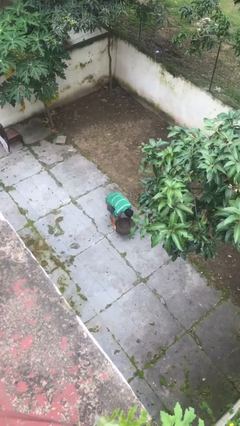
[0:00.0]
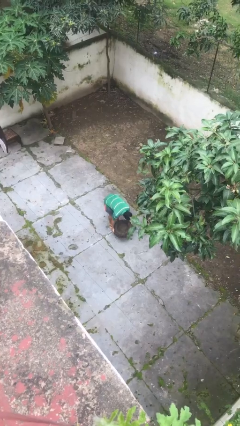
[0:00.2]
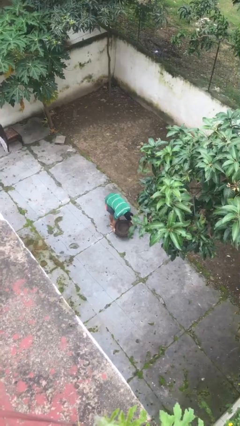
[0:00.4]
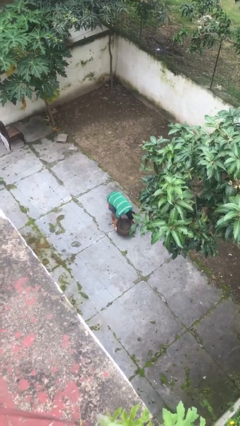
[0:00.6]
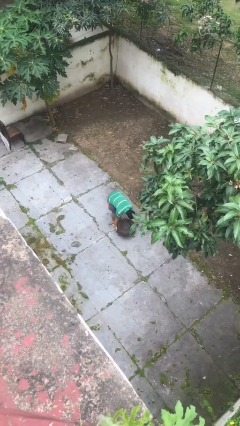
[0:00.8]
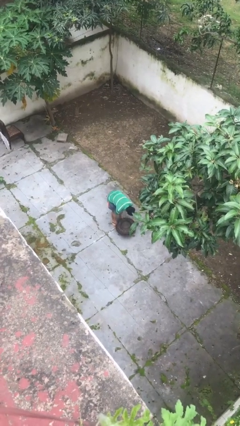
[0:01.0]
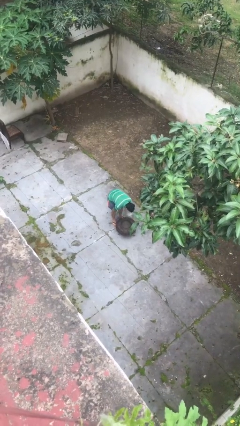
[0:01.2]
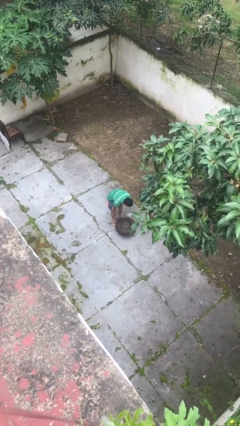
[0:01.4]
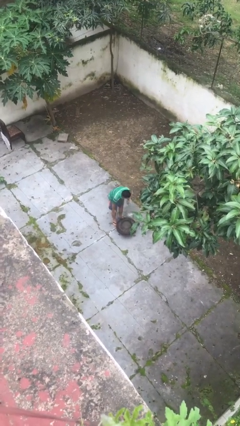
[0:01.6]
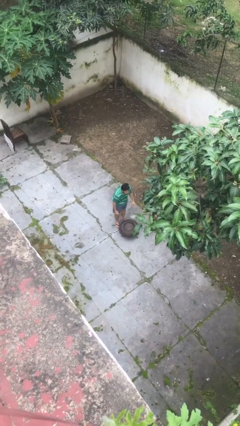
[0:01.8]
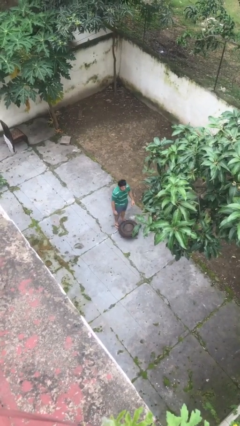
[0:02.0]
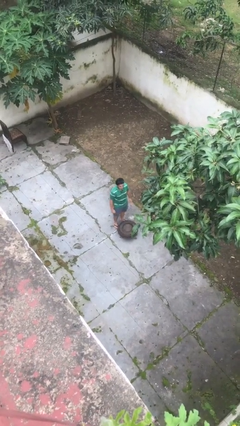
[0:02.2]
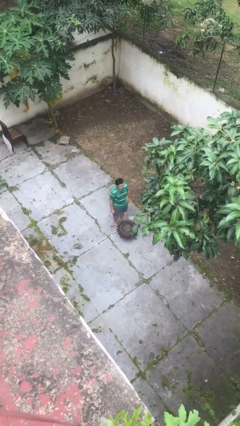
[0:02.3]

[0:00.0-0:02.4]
person puts down object on floor

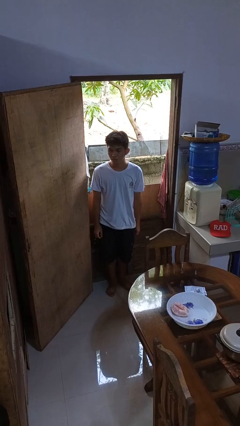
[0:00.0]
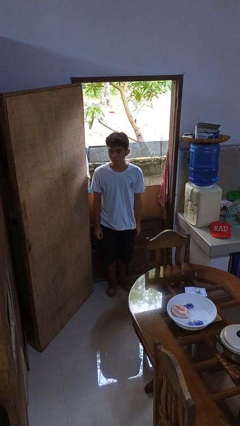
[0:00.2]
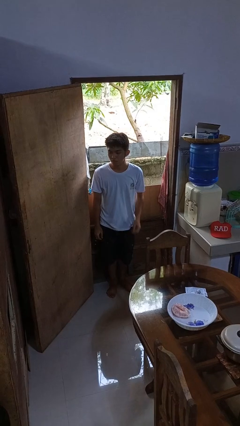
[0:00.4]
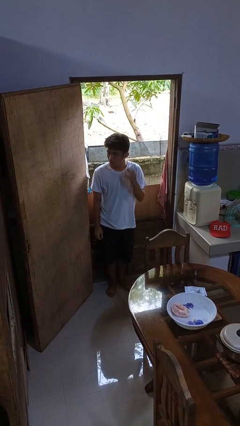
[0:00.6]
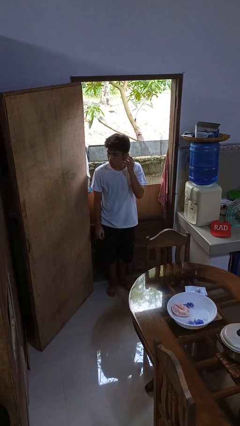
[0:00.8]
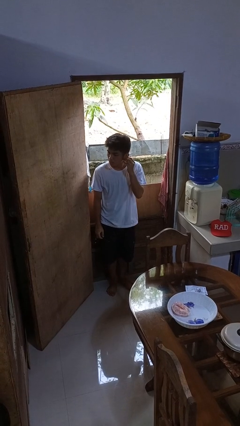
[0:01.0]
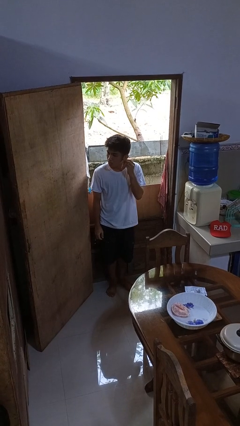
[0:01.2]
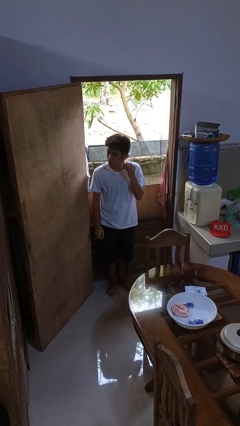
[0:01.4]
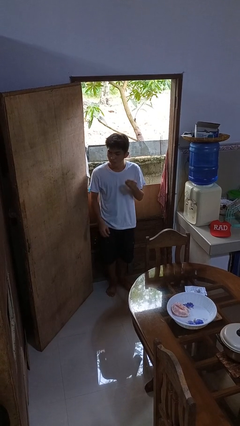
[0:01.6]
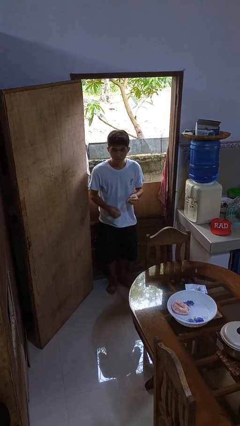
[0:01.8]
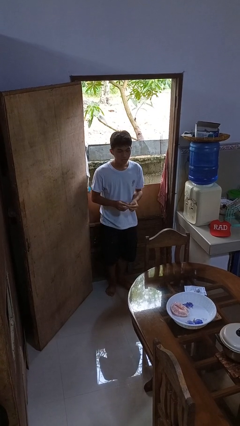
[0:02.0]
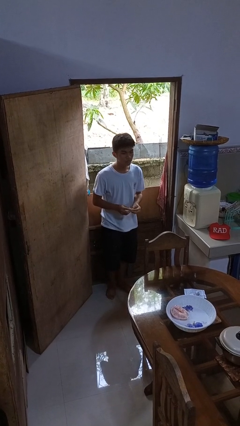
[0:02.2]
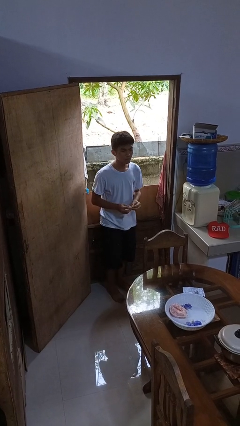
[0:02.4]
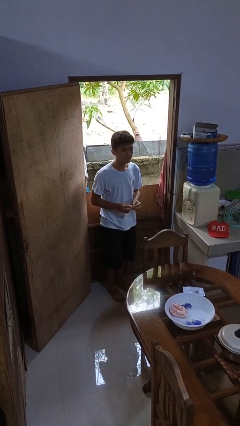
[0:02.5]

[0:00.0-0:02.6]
person takes off earrings

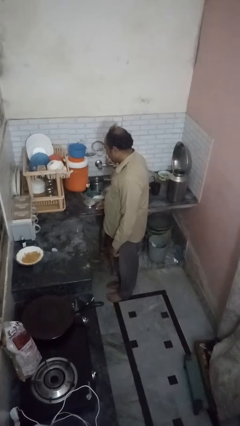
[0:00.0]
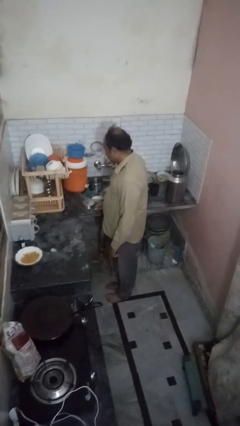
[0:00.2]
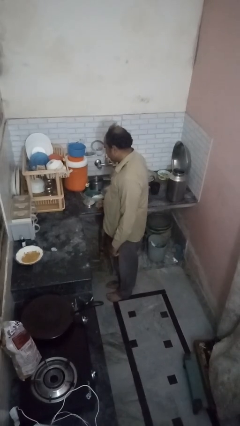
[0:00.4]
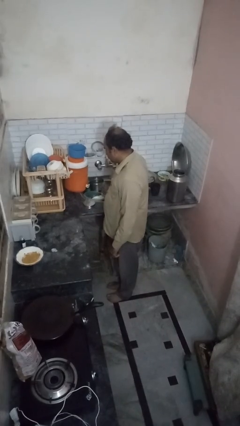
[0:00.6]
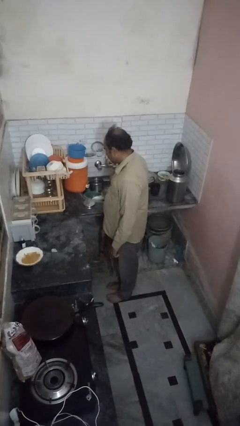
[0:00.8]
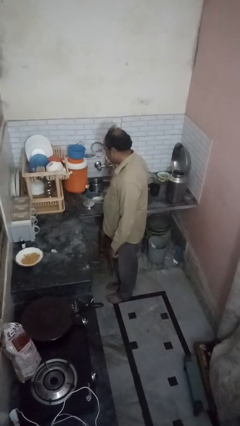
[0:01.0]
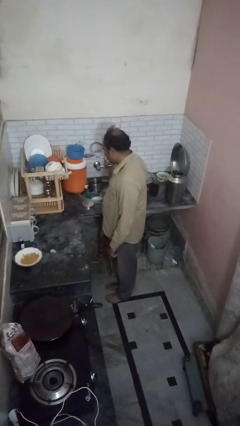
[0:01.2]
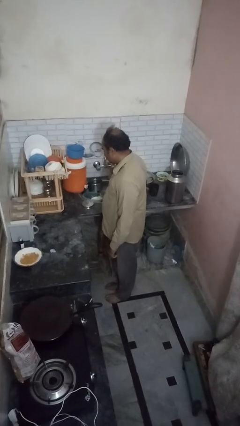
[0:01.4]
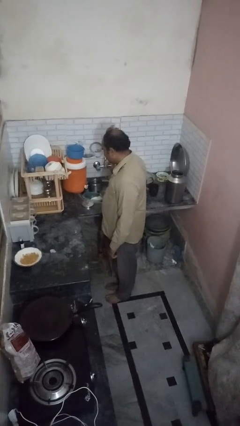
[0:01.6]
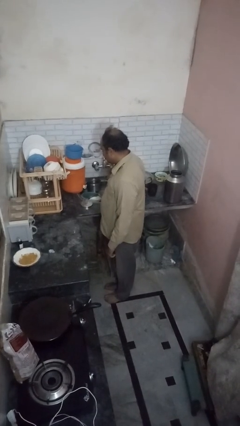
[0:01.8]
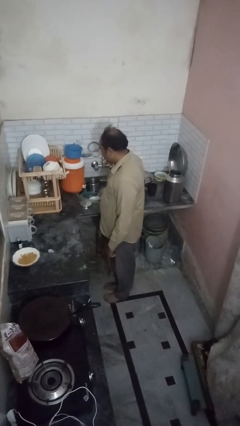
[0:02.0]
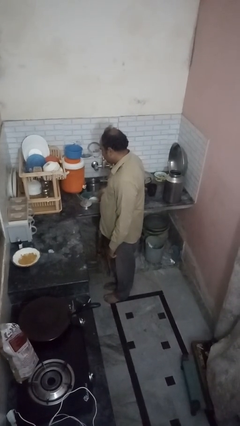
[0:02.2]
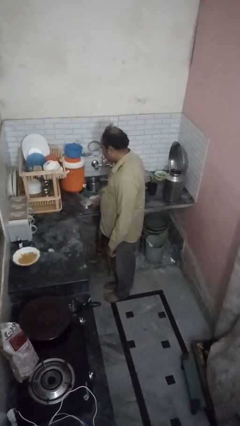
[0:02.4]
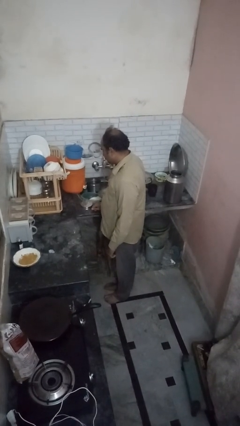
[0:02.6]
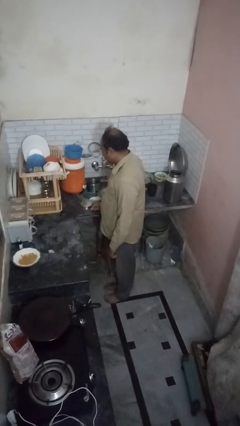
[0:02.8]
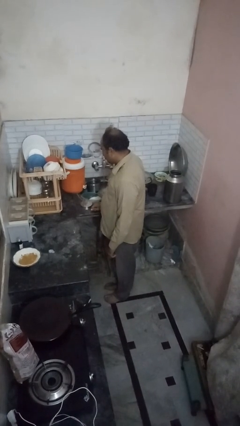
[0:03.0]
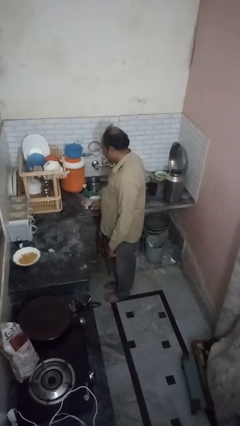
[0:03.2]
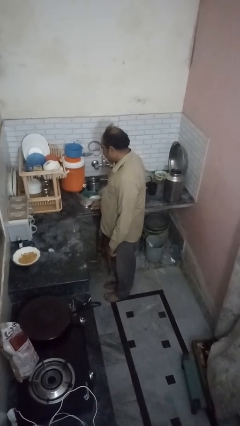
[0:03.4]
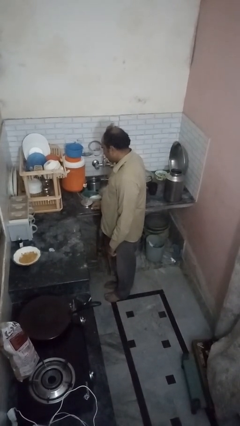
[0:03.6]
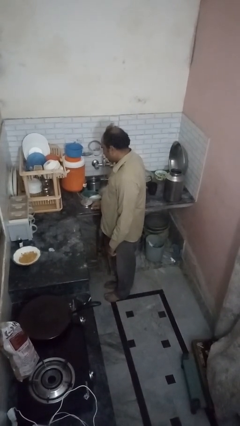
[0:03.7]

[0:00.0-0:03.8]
person opens dishwasher

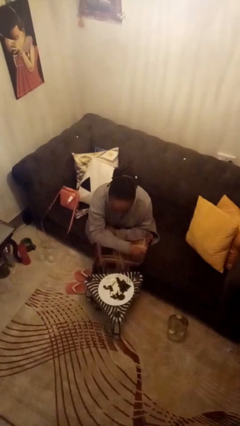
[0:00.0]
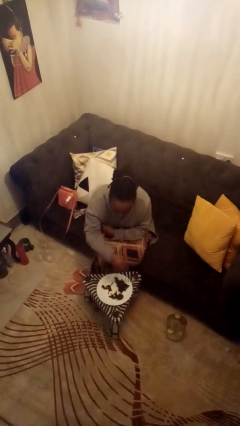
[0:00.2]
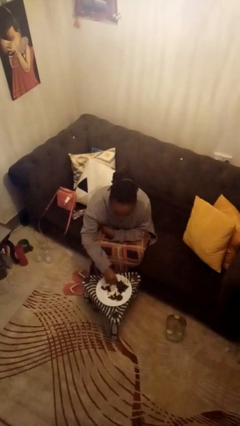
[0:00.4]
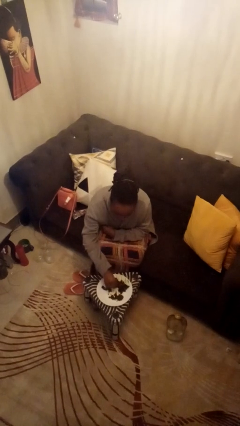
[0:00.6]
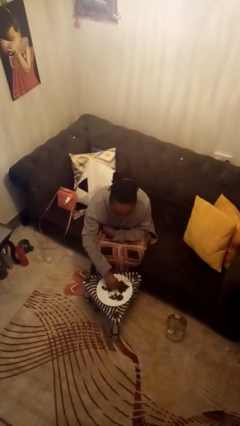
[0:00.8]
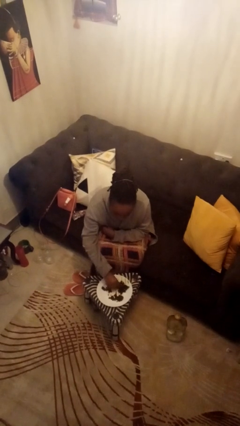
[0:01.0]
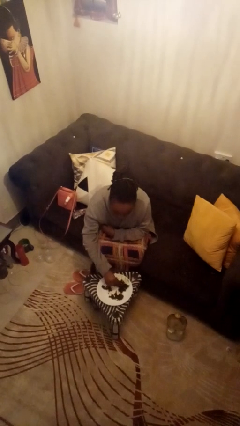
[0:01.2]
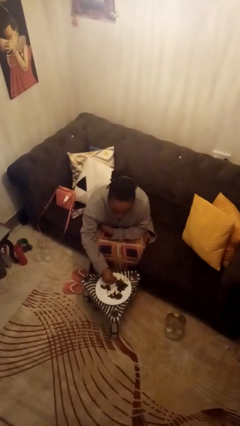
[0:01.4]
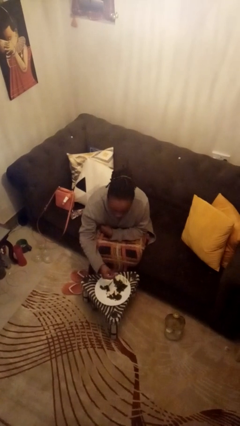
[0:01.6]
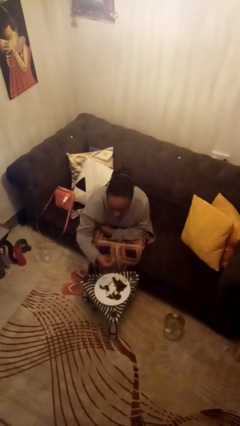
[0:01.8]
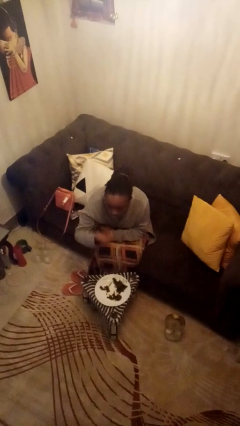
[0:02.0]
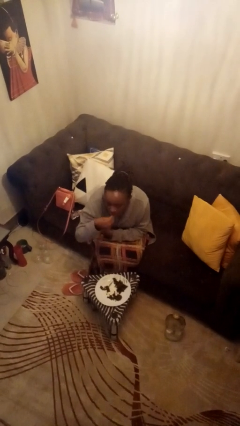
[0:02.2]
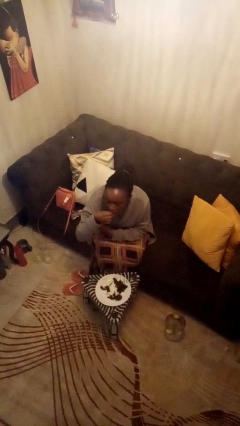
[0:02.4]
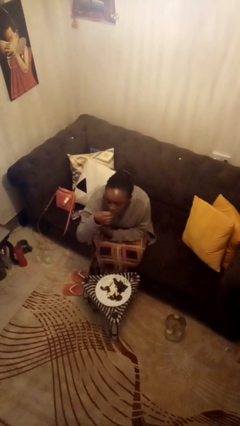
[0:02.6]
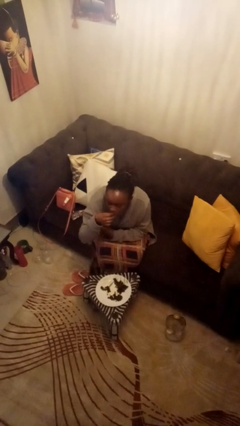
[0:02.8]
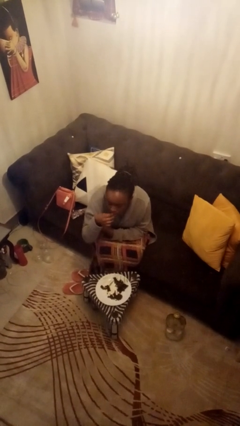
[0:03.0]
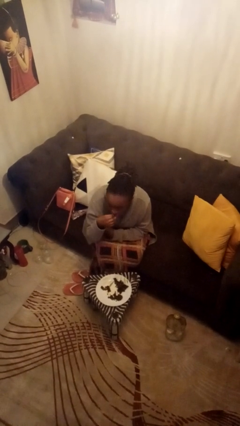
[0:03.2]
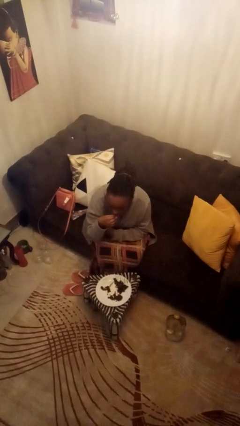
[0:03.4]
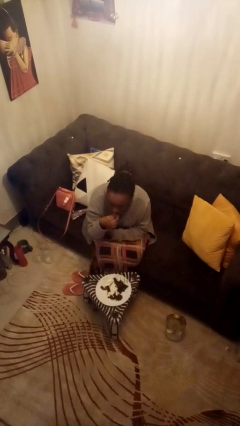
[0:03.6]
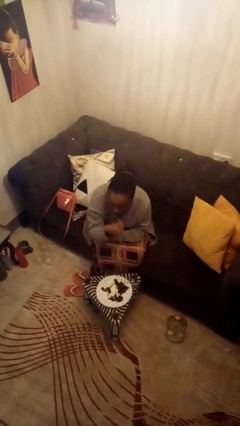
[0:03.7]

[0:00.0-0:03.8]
person eats with hands

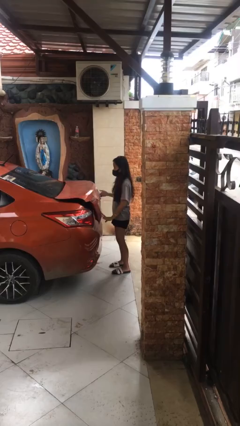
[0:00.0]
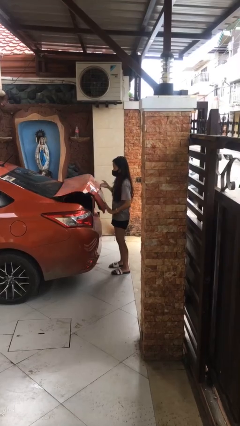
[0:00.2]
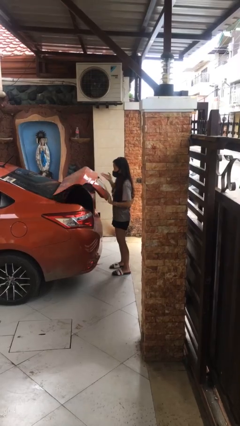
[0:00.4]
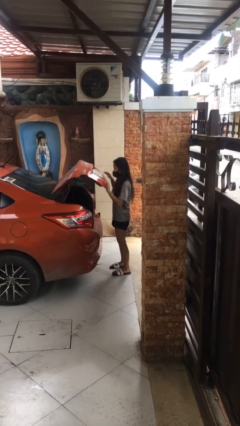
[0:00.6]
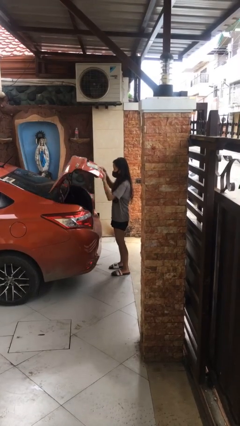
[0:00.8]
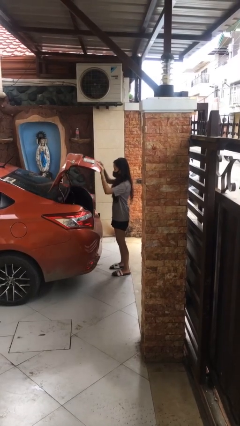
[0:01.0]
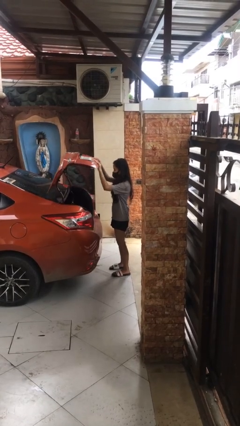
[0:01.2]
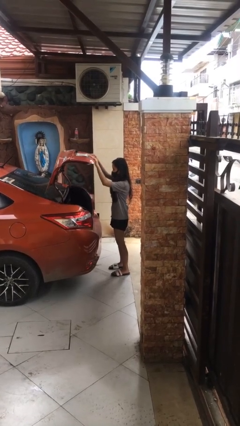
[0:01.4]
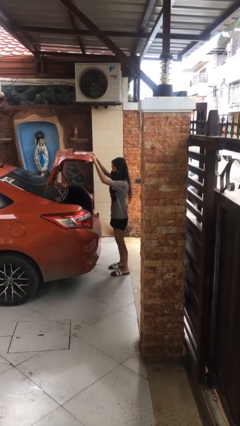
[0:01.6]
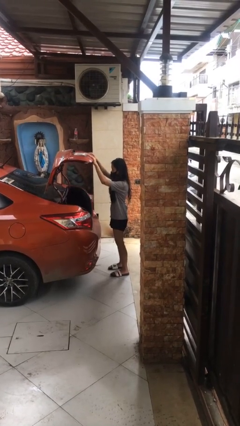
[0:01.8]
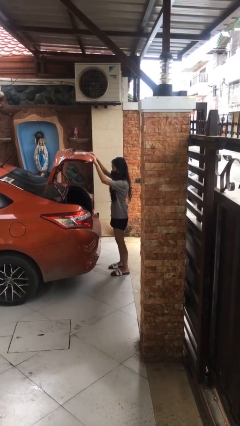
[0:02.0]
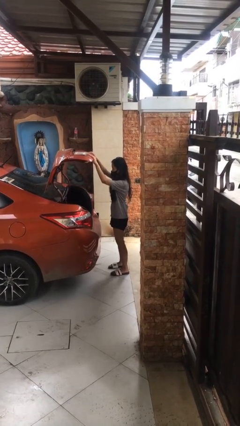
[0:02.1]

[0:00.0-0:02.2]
person opens car trunk

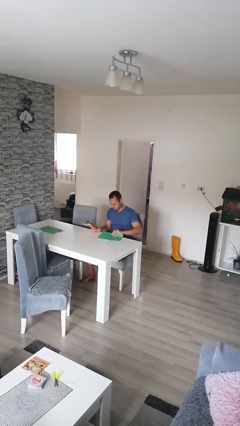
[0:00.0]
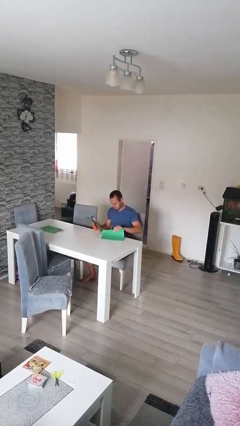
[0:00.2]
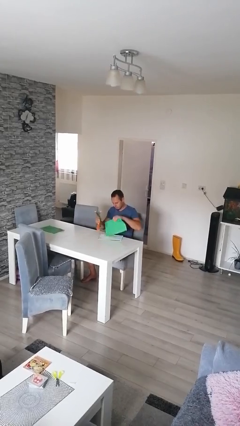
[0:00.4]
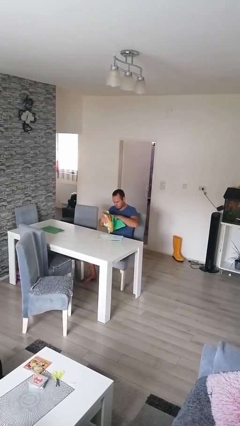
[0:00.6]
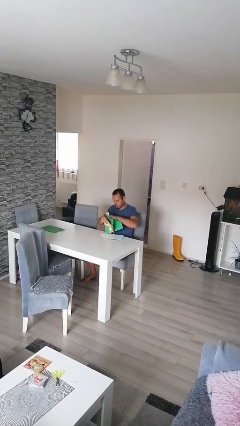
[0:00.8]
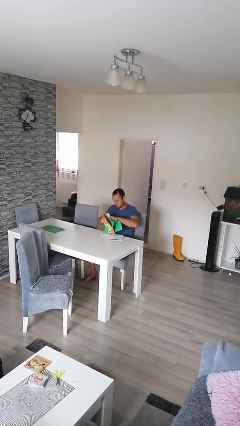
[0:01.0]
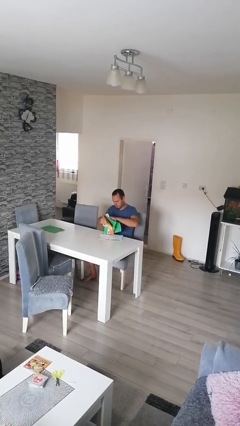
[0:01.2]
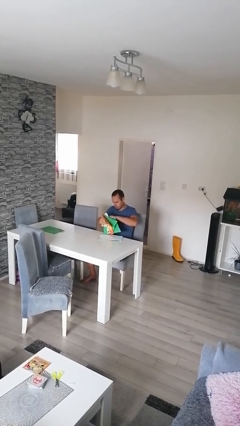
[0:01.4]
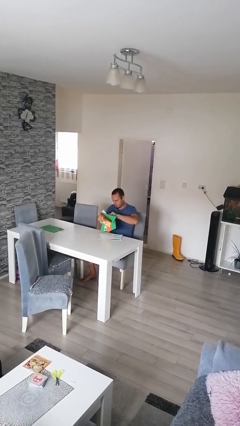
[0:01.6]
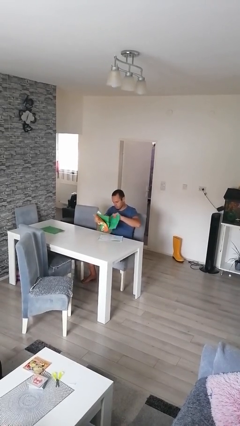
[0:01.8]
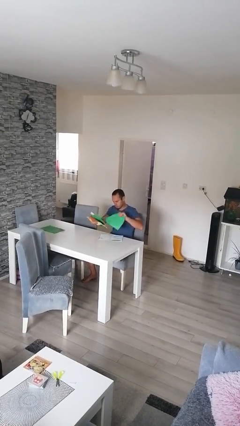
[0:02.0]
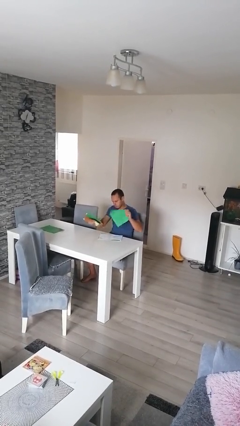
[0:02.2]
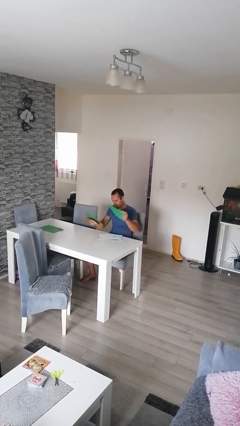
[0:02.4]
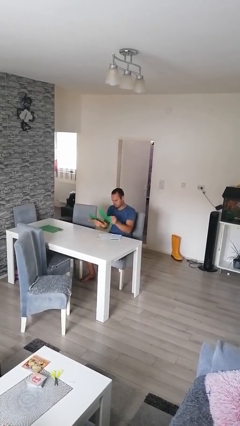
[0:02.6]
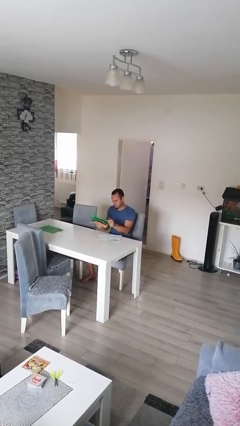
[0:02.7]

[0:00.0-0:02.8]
person tears paper
